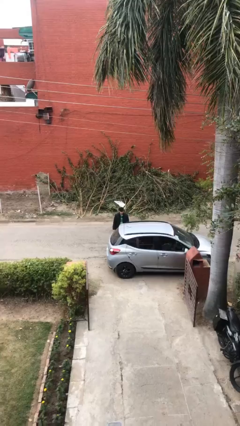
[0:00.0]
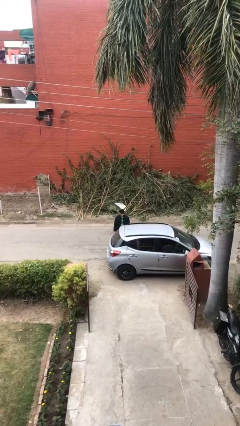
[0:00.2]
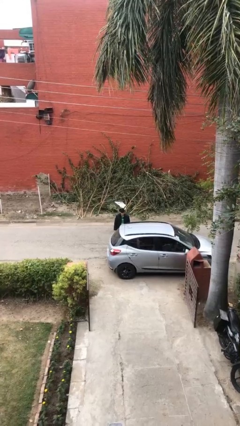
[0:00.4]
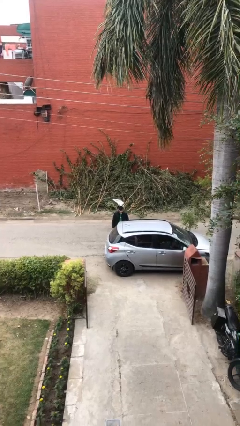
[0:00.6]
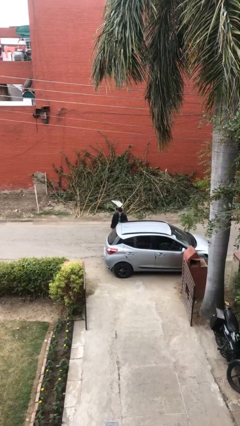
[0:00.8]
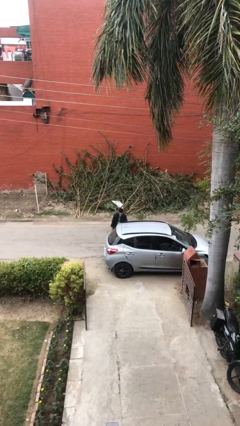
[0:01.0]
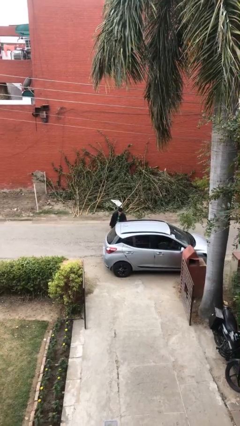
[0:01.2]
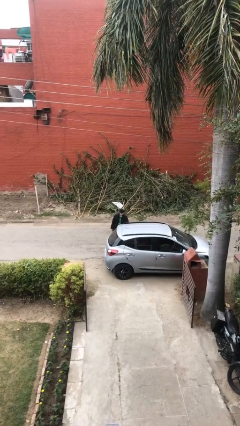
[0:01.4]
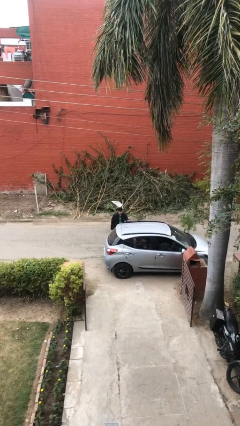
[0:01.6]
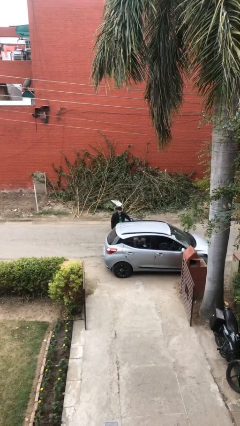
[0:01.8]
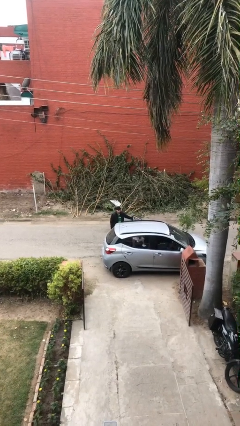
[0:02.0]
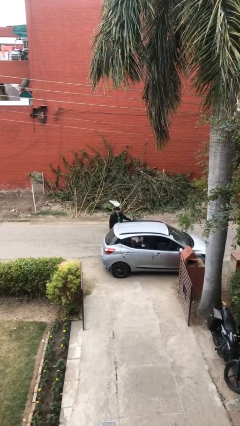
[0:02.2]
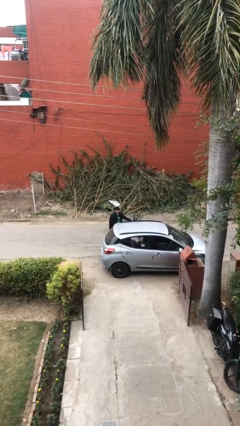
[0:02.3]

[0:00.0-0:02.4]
person opens car door

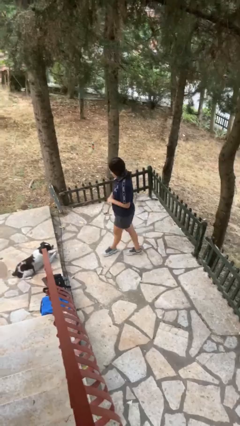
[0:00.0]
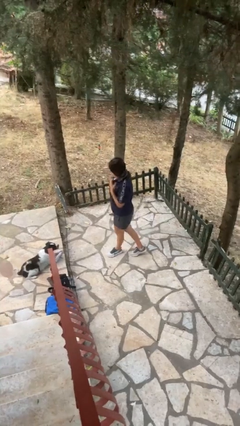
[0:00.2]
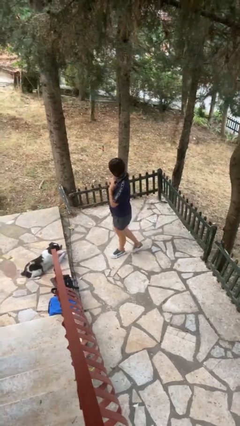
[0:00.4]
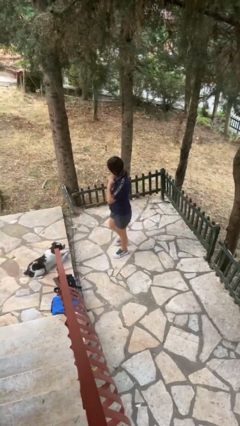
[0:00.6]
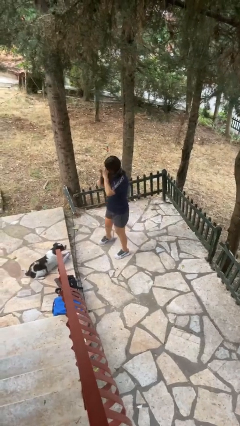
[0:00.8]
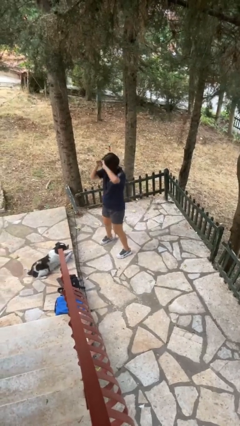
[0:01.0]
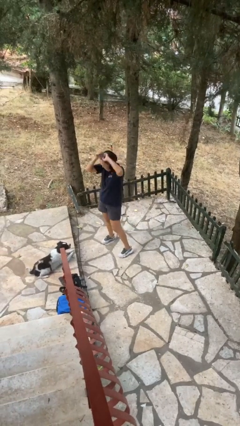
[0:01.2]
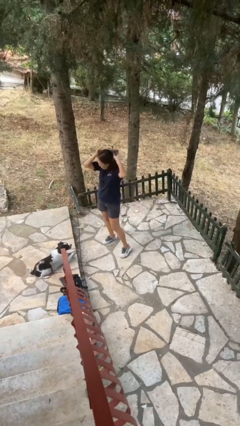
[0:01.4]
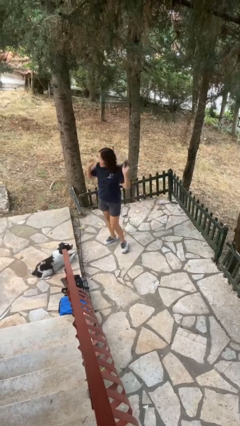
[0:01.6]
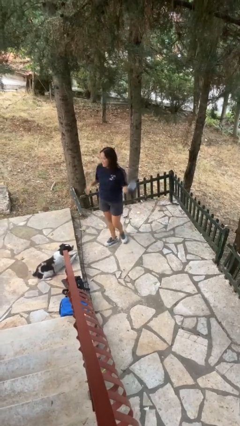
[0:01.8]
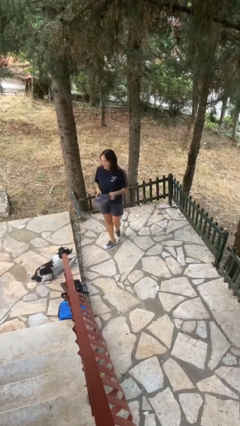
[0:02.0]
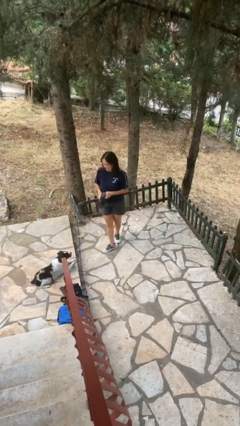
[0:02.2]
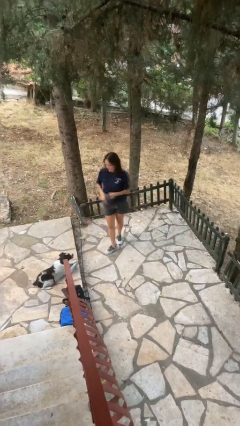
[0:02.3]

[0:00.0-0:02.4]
person takes off scarf

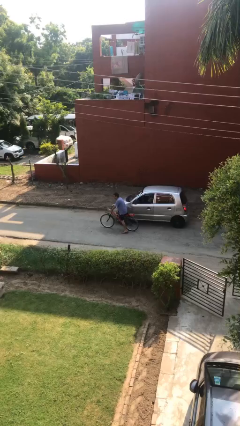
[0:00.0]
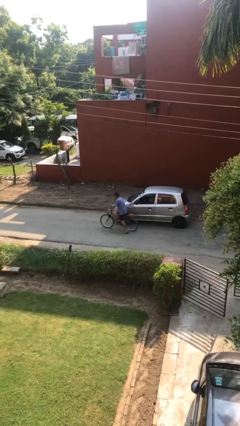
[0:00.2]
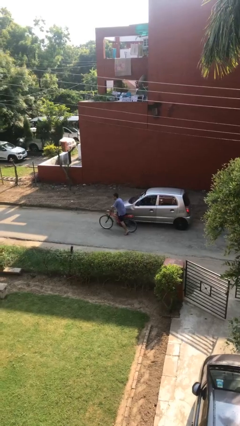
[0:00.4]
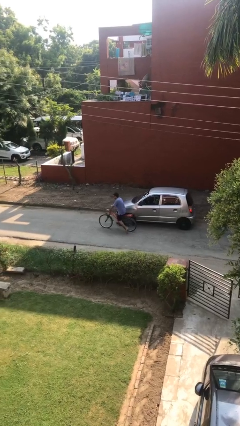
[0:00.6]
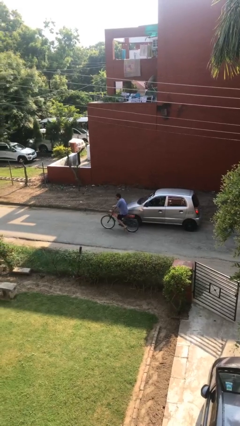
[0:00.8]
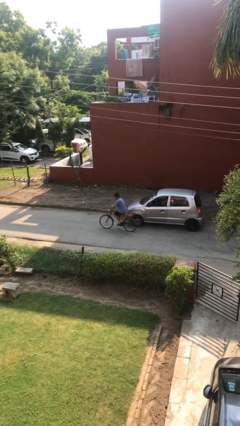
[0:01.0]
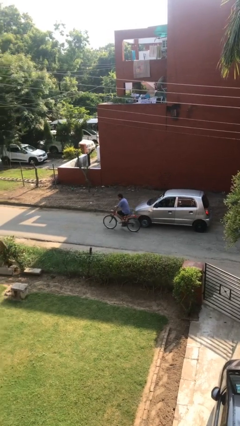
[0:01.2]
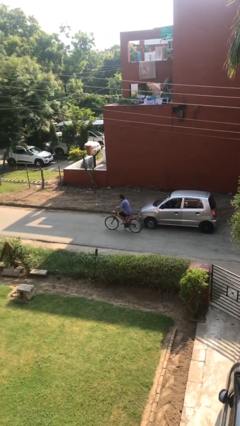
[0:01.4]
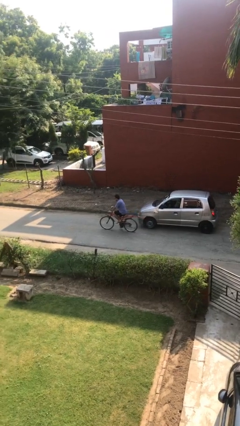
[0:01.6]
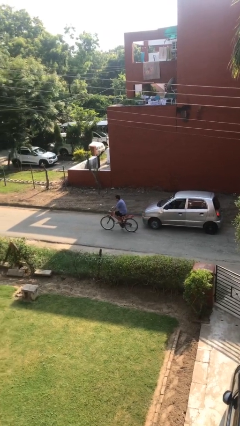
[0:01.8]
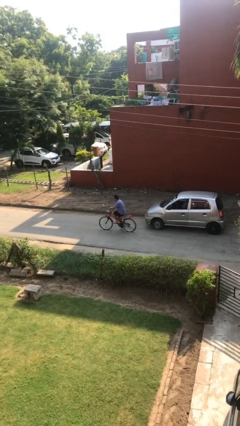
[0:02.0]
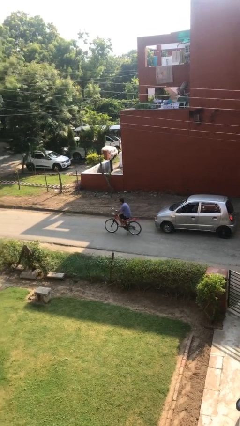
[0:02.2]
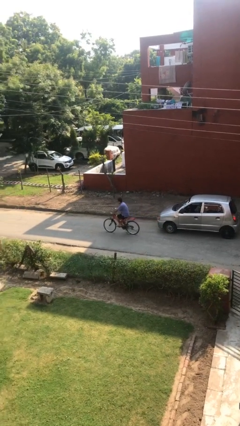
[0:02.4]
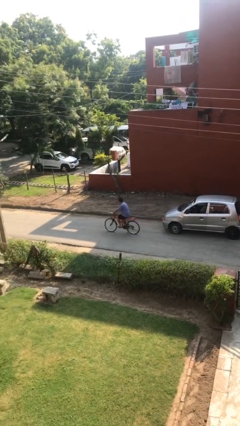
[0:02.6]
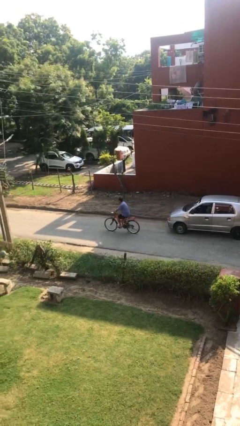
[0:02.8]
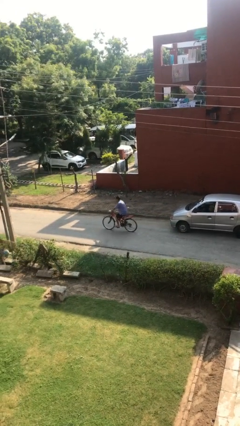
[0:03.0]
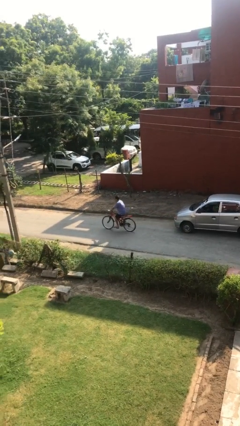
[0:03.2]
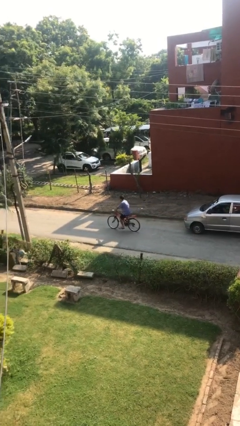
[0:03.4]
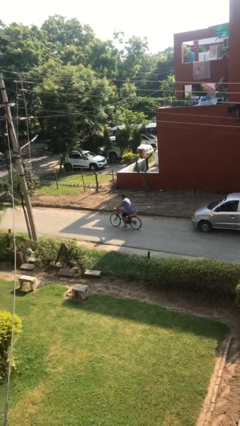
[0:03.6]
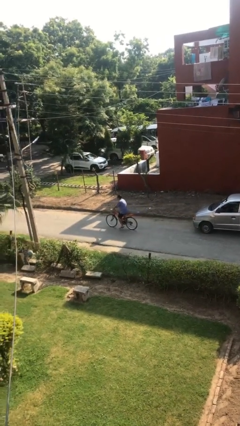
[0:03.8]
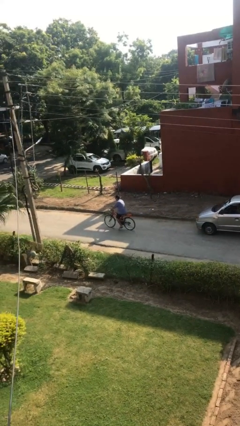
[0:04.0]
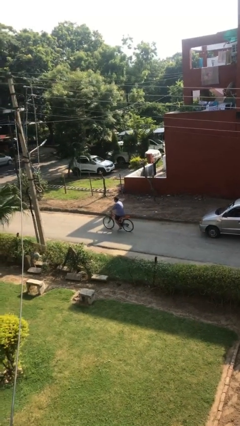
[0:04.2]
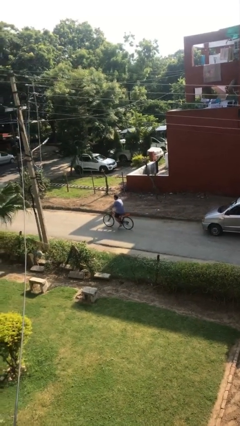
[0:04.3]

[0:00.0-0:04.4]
person rides bicycle

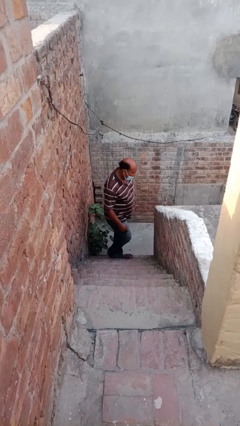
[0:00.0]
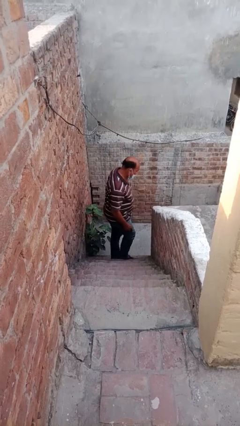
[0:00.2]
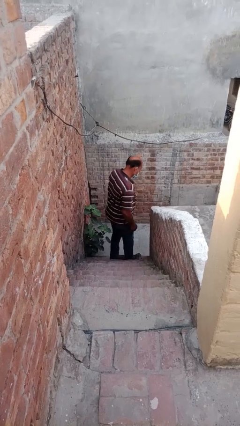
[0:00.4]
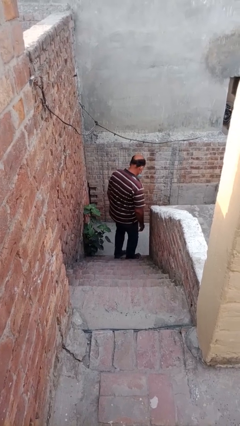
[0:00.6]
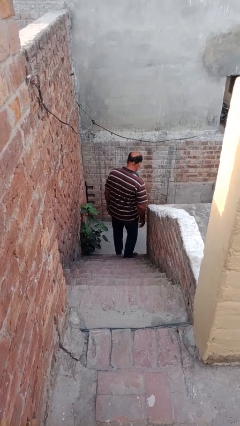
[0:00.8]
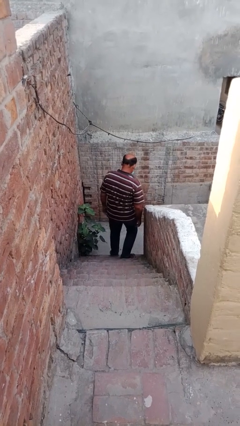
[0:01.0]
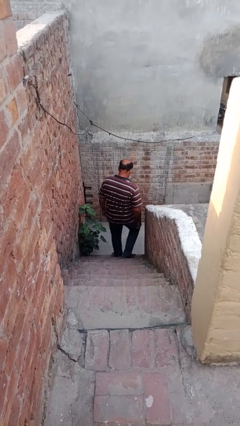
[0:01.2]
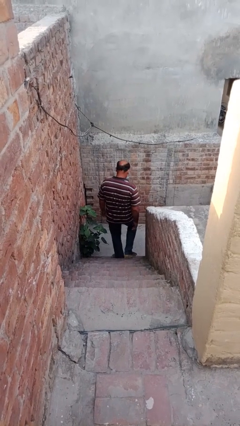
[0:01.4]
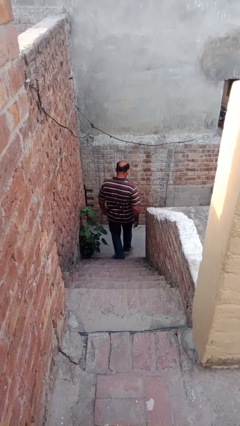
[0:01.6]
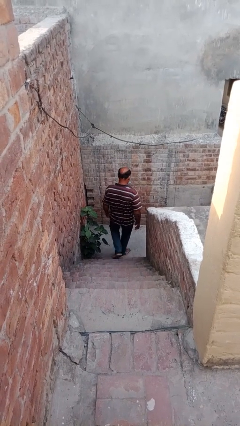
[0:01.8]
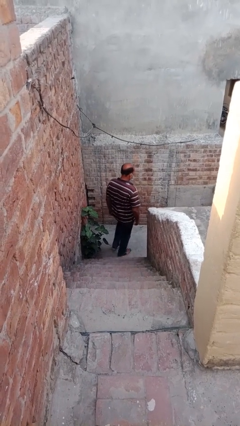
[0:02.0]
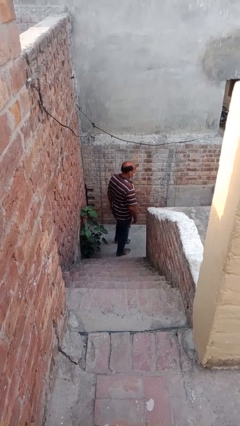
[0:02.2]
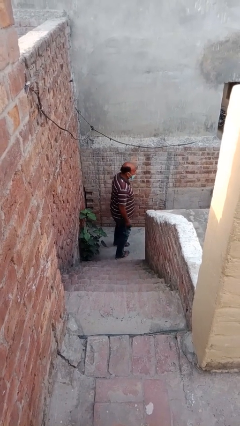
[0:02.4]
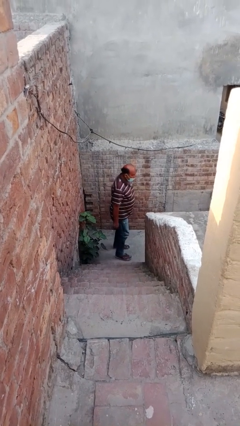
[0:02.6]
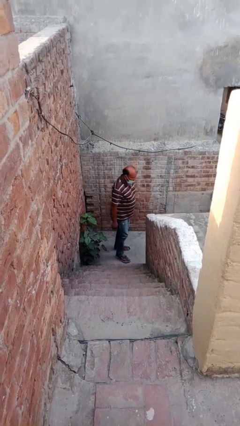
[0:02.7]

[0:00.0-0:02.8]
person climbs down stairs

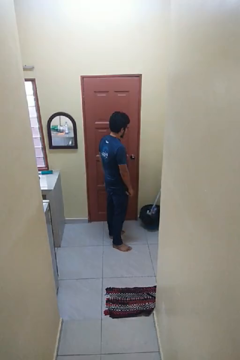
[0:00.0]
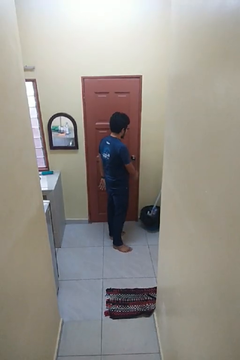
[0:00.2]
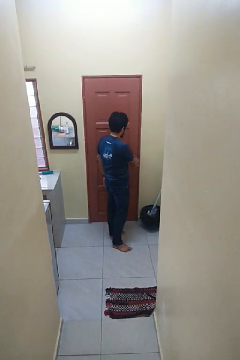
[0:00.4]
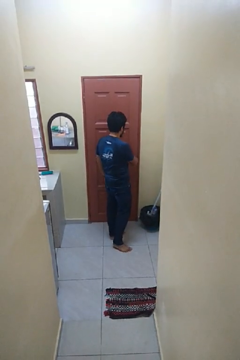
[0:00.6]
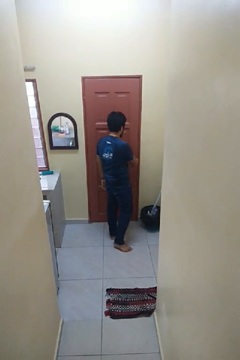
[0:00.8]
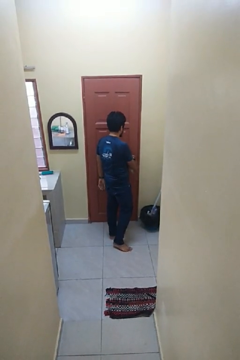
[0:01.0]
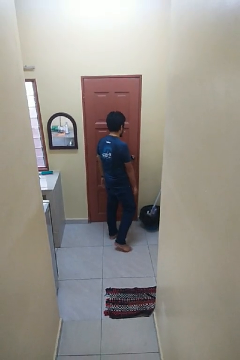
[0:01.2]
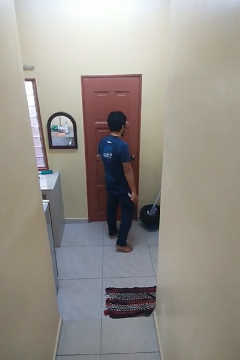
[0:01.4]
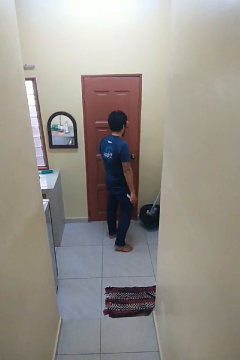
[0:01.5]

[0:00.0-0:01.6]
person locks door with keys

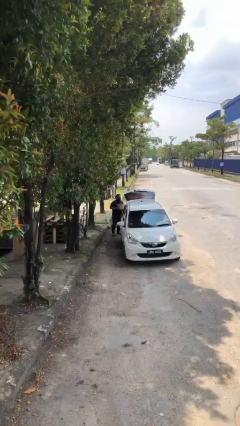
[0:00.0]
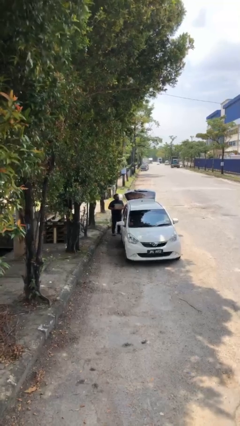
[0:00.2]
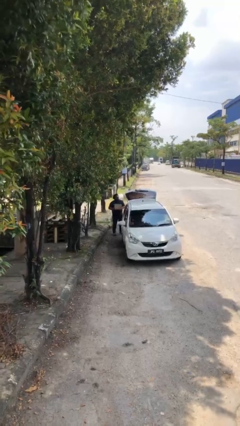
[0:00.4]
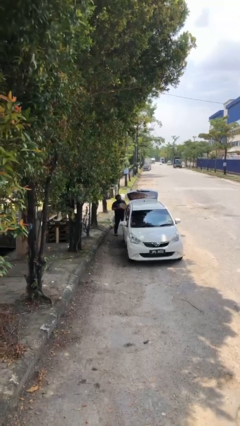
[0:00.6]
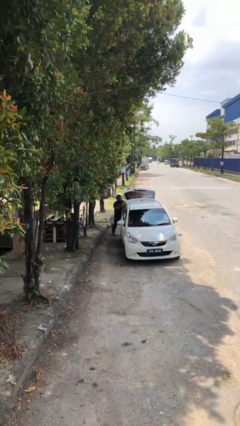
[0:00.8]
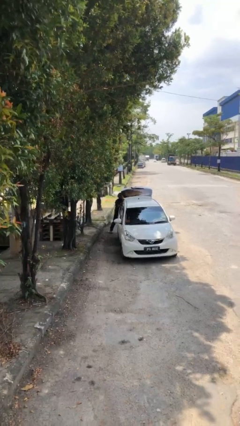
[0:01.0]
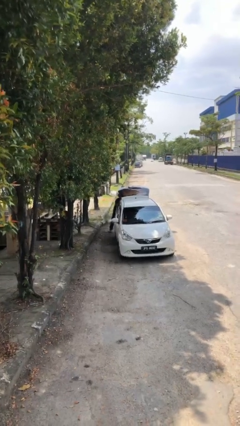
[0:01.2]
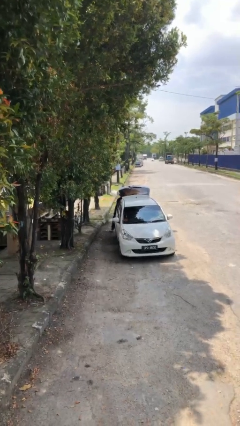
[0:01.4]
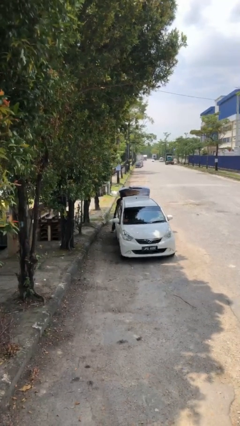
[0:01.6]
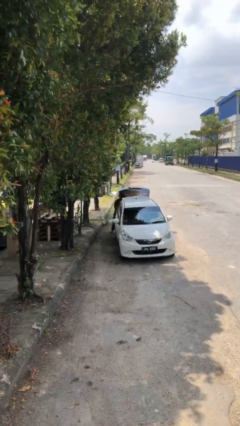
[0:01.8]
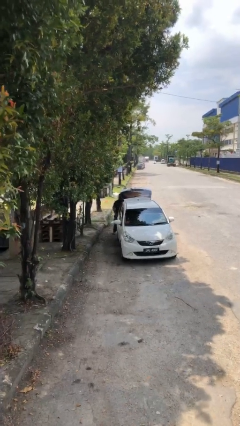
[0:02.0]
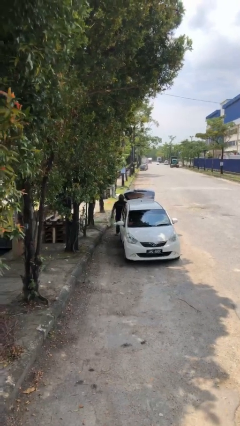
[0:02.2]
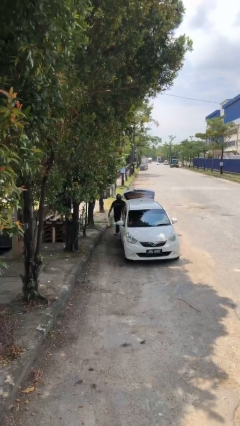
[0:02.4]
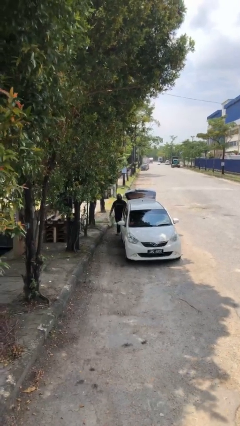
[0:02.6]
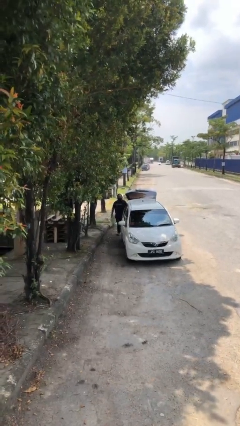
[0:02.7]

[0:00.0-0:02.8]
person loads car

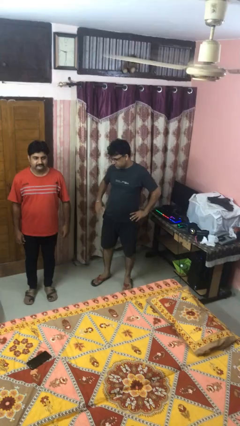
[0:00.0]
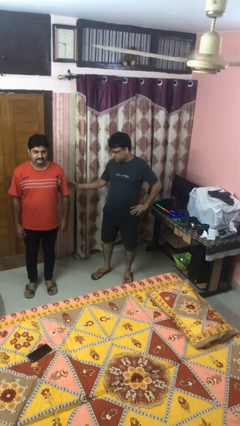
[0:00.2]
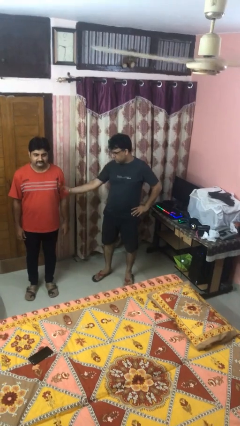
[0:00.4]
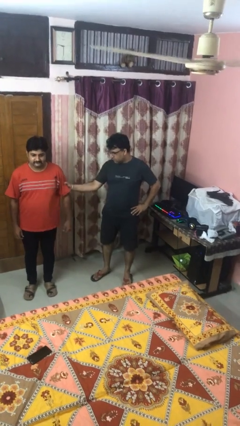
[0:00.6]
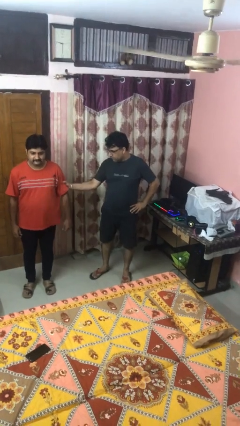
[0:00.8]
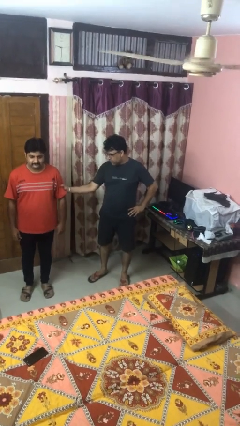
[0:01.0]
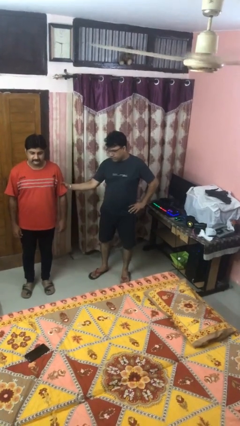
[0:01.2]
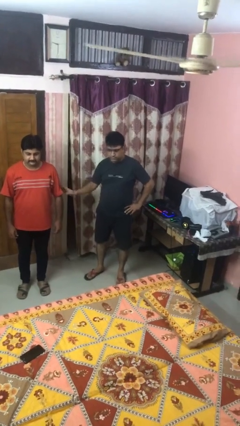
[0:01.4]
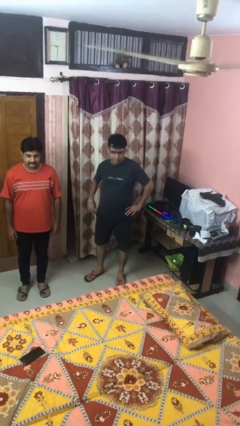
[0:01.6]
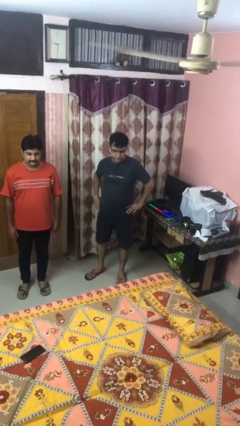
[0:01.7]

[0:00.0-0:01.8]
person grabs person by bicep
